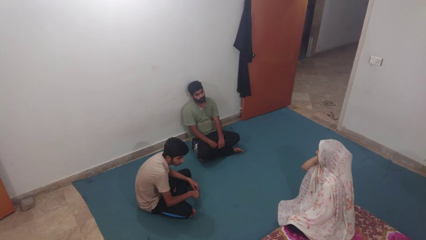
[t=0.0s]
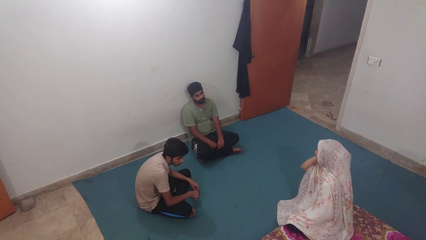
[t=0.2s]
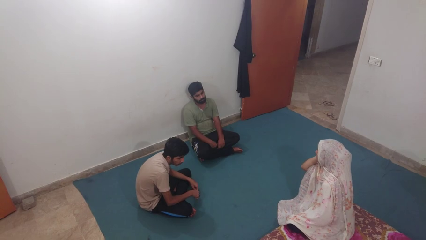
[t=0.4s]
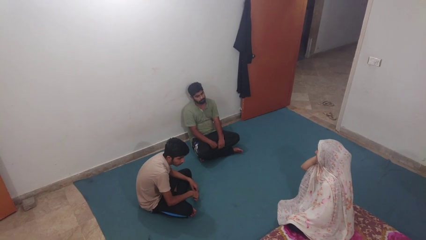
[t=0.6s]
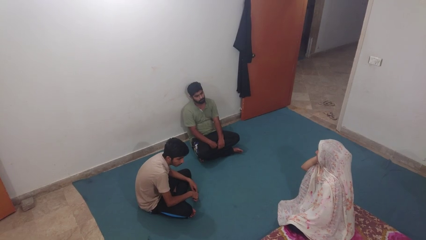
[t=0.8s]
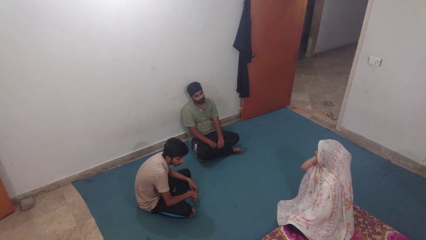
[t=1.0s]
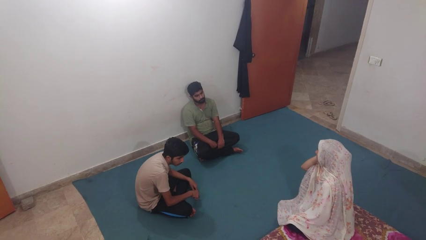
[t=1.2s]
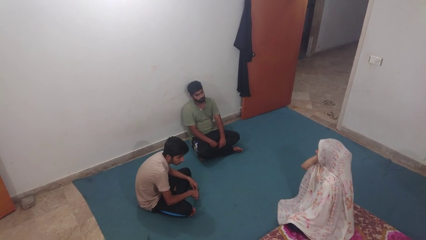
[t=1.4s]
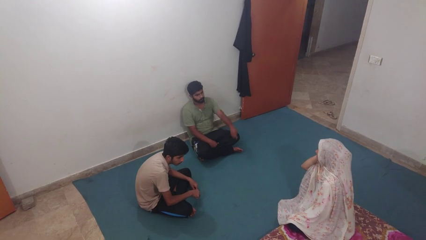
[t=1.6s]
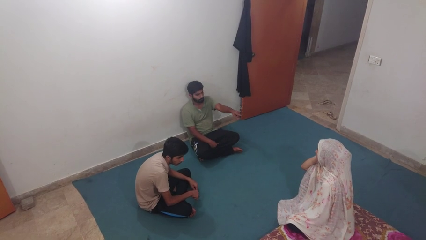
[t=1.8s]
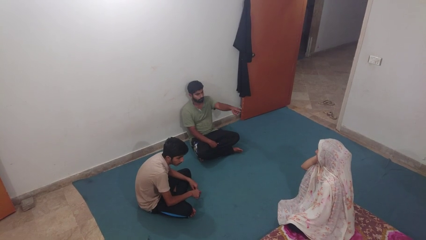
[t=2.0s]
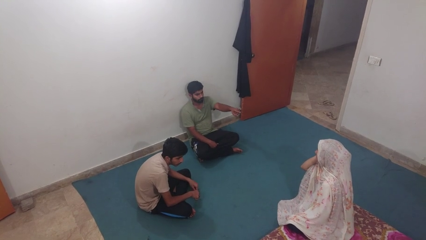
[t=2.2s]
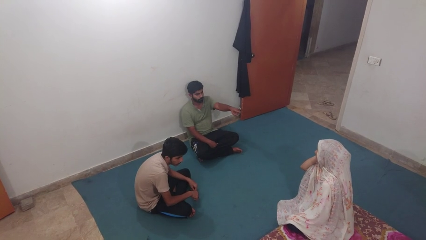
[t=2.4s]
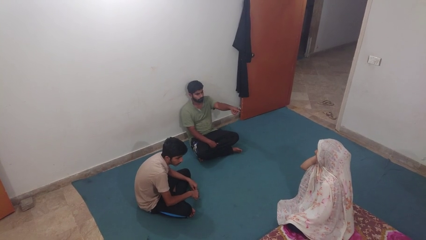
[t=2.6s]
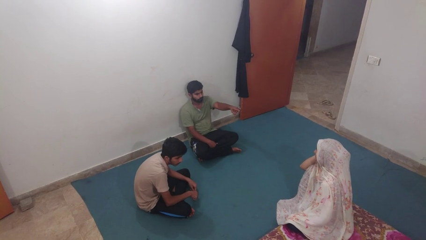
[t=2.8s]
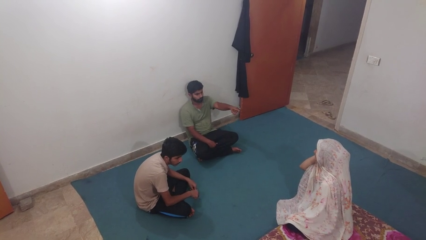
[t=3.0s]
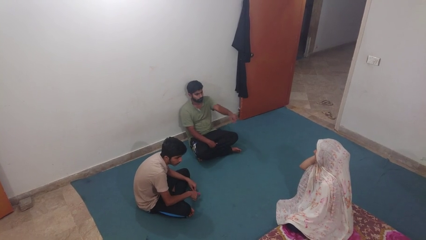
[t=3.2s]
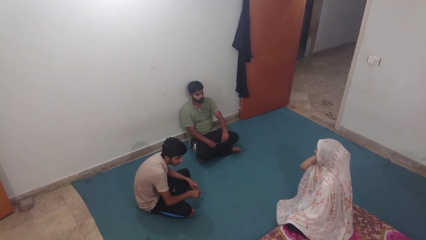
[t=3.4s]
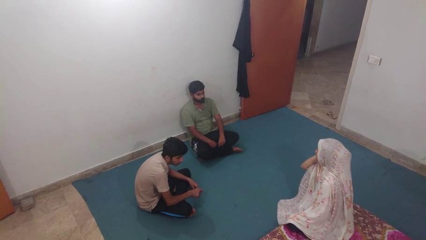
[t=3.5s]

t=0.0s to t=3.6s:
person points at person

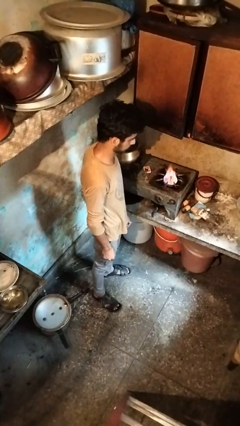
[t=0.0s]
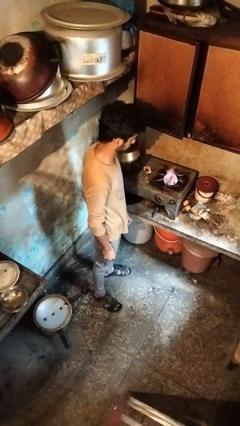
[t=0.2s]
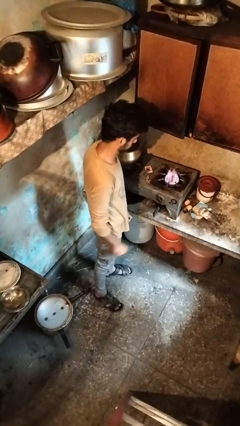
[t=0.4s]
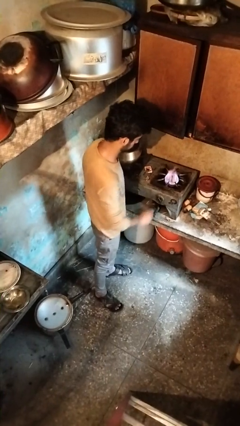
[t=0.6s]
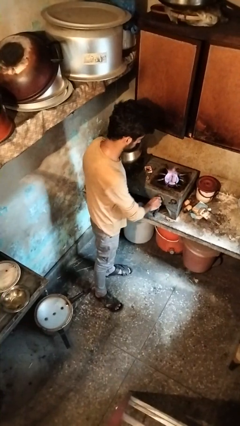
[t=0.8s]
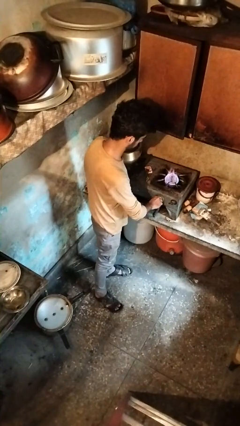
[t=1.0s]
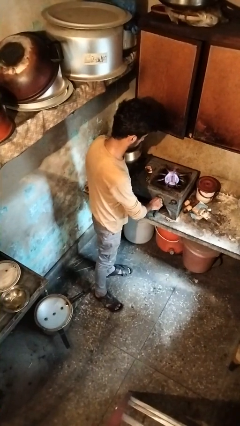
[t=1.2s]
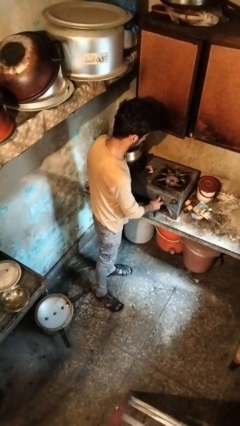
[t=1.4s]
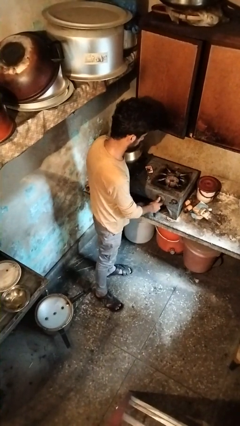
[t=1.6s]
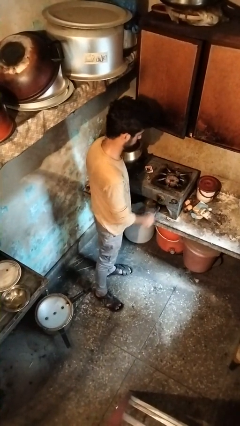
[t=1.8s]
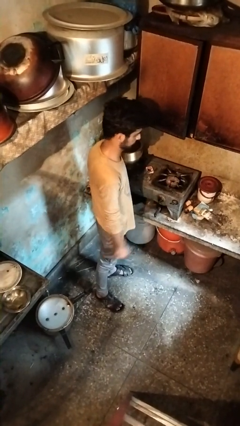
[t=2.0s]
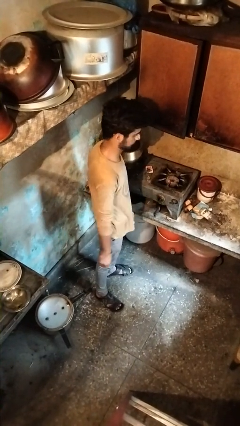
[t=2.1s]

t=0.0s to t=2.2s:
person turns off stovetop

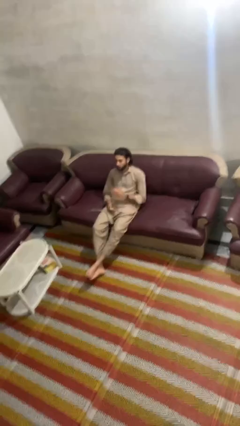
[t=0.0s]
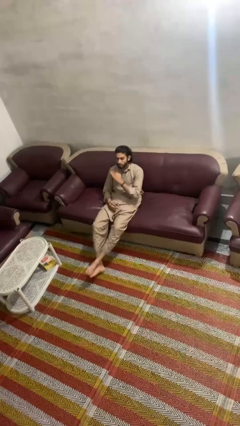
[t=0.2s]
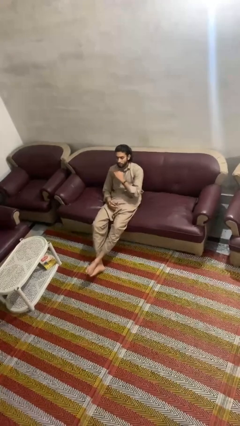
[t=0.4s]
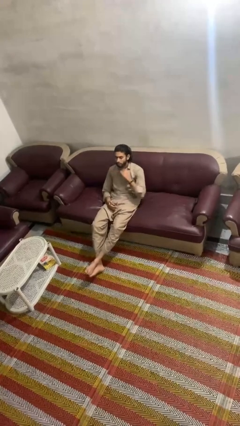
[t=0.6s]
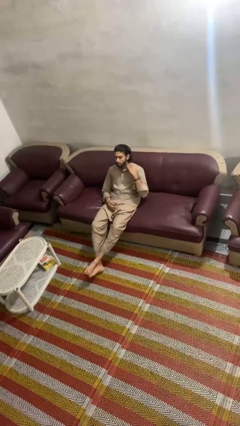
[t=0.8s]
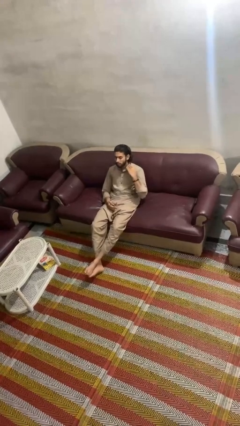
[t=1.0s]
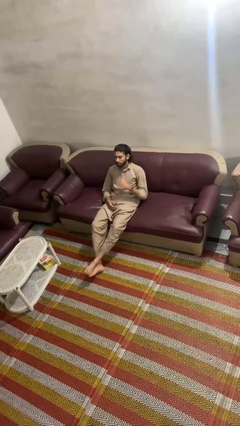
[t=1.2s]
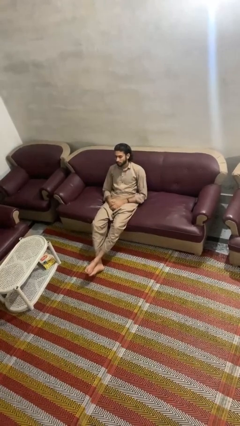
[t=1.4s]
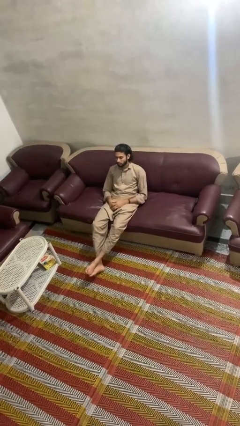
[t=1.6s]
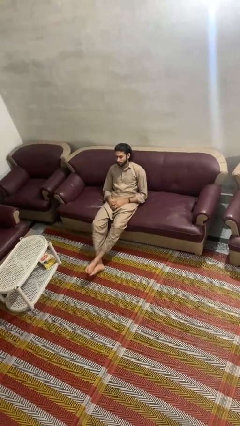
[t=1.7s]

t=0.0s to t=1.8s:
person gestures cut

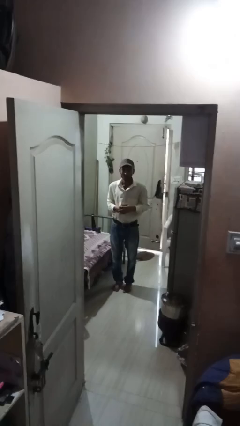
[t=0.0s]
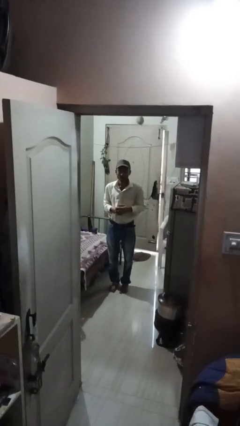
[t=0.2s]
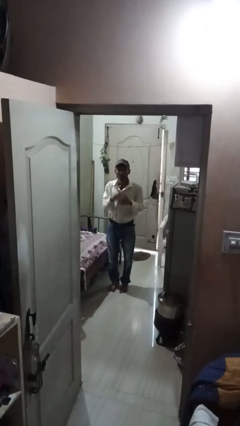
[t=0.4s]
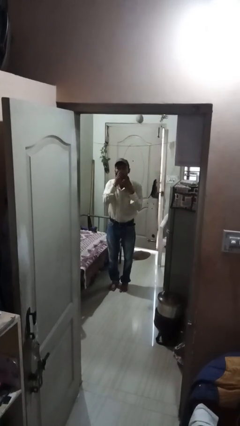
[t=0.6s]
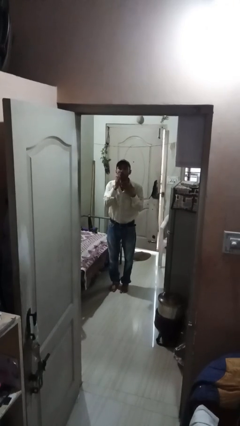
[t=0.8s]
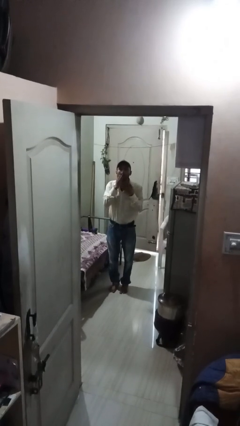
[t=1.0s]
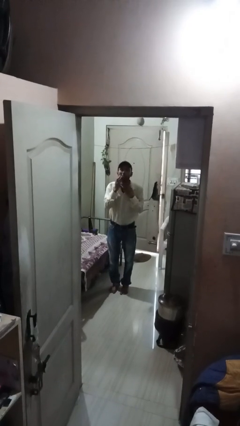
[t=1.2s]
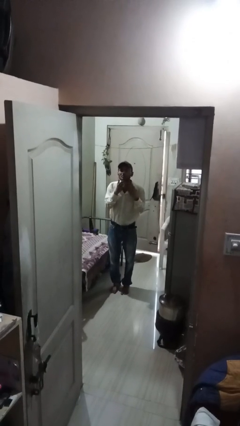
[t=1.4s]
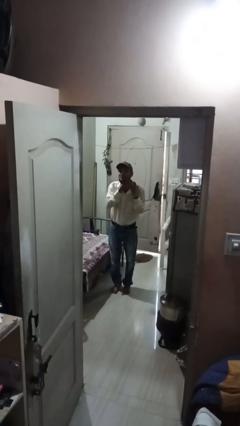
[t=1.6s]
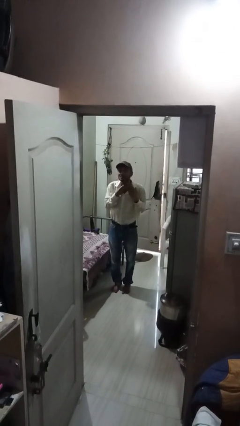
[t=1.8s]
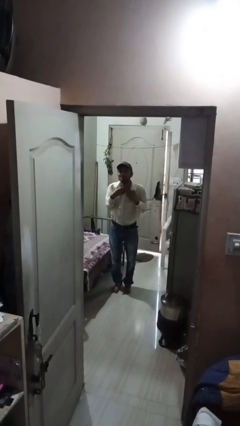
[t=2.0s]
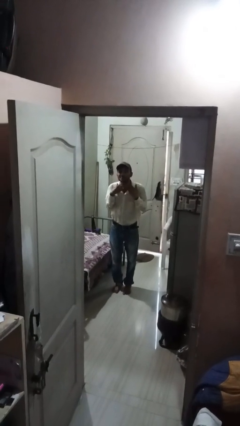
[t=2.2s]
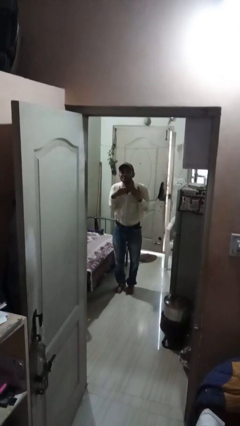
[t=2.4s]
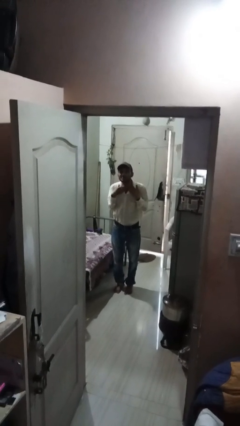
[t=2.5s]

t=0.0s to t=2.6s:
person rubs neck

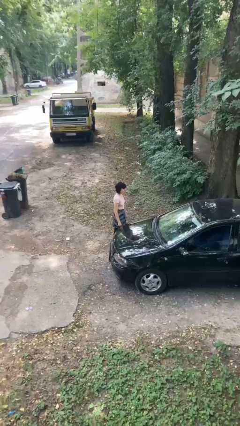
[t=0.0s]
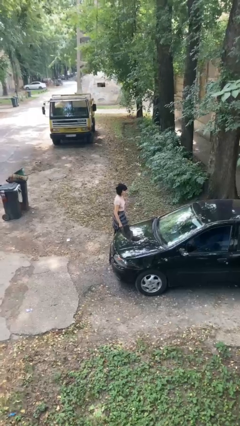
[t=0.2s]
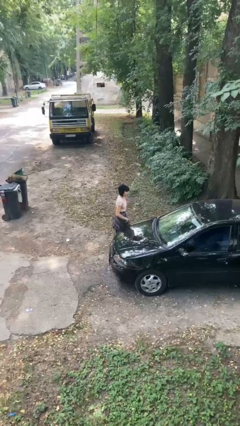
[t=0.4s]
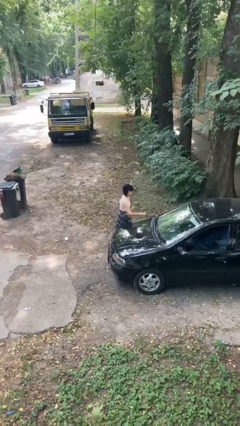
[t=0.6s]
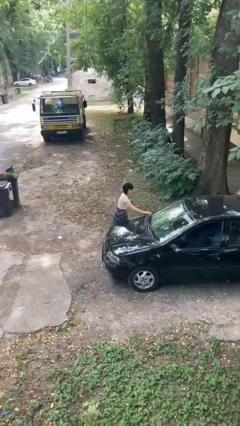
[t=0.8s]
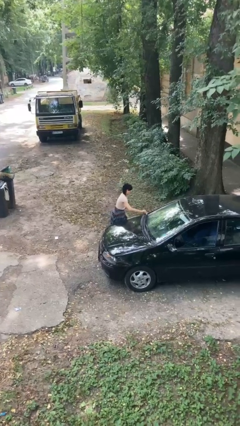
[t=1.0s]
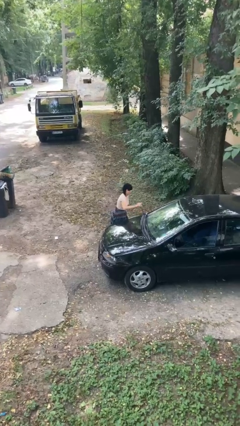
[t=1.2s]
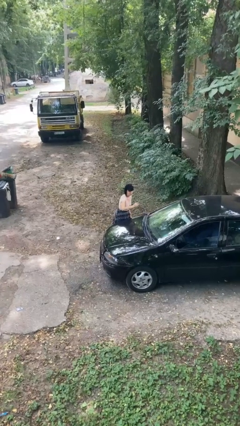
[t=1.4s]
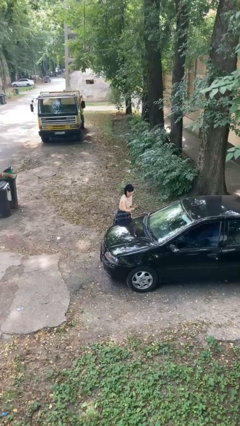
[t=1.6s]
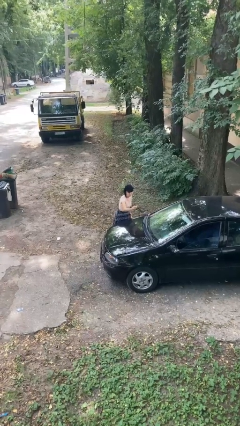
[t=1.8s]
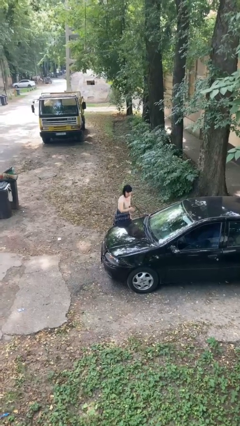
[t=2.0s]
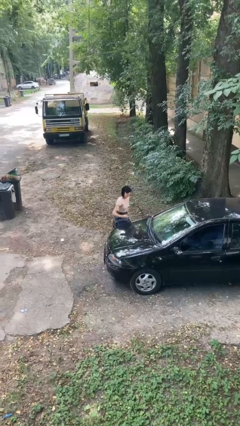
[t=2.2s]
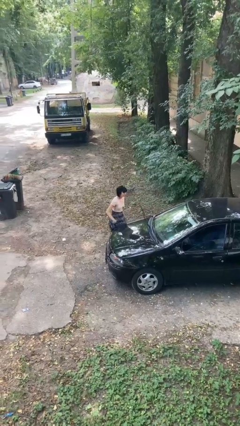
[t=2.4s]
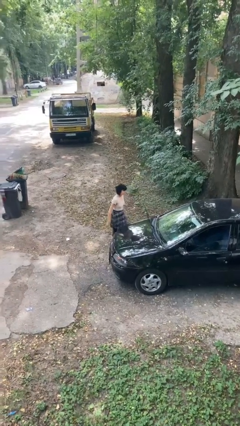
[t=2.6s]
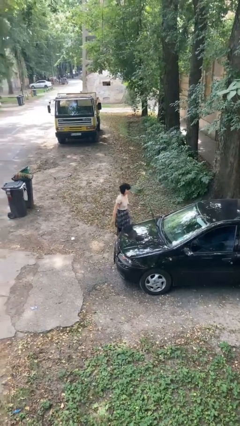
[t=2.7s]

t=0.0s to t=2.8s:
person flips up car wipers

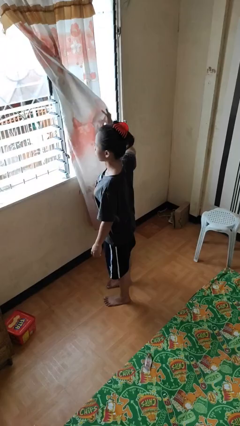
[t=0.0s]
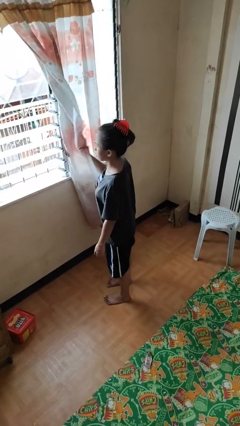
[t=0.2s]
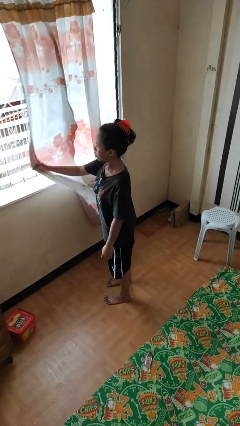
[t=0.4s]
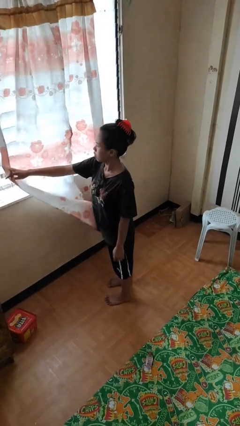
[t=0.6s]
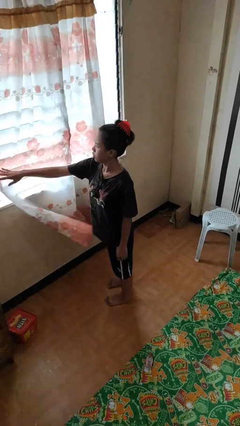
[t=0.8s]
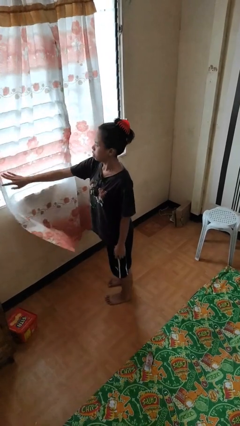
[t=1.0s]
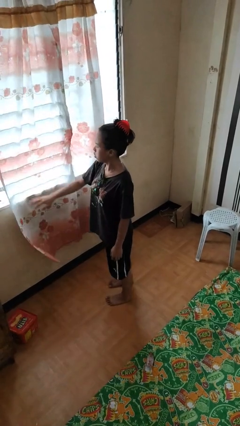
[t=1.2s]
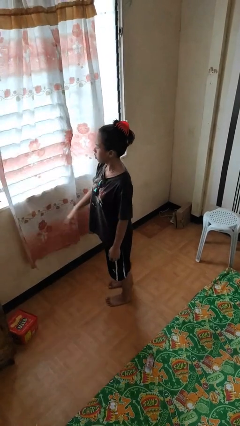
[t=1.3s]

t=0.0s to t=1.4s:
person closes curtains

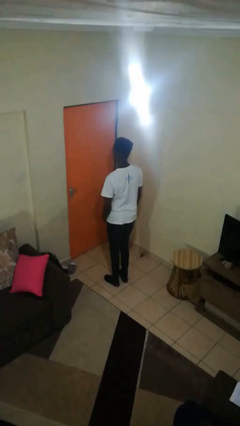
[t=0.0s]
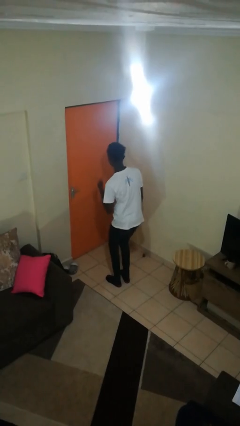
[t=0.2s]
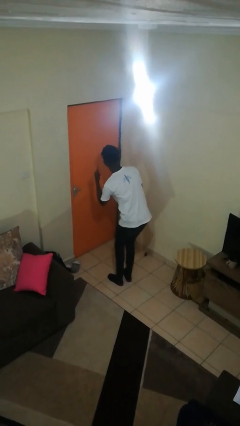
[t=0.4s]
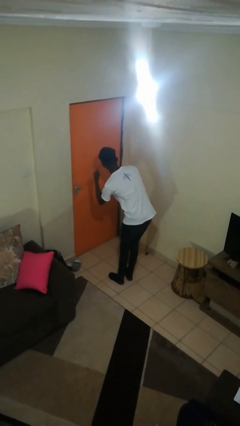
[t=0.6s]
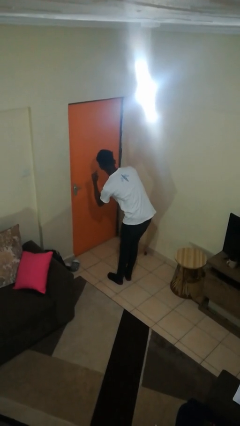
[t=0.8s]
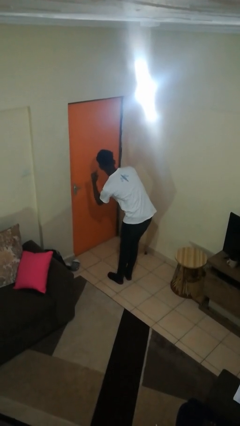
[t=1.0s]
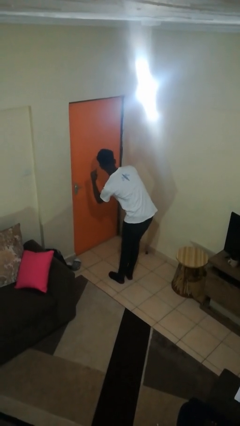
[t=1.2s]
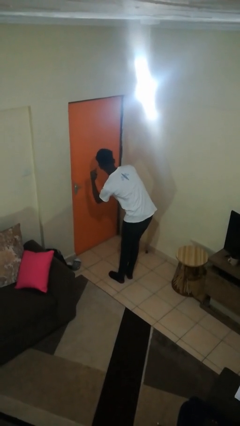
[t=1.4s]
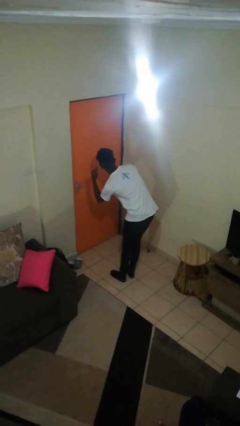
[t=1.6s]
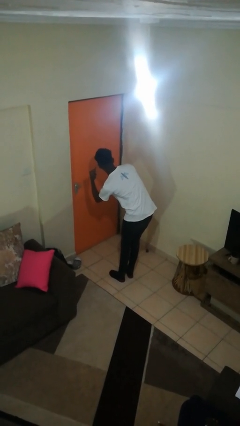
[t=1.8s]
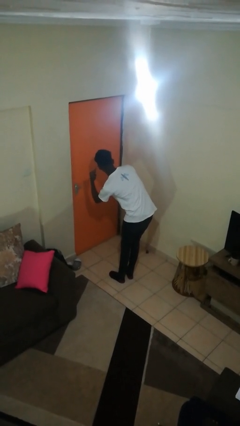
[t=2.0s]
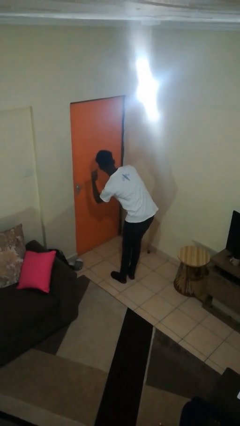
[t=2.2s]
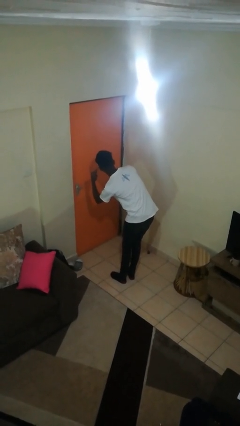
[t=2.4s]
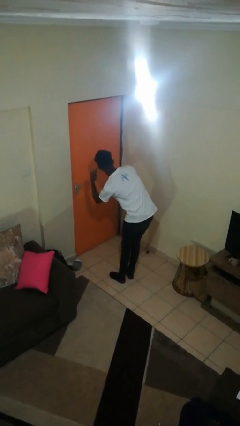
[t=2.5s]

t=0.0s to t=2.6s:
person gestures listen closely
